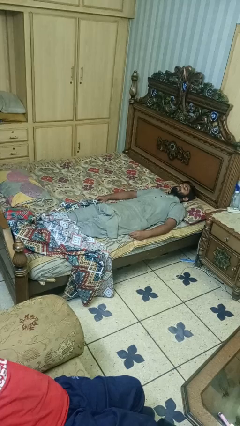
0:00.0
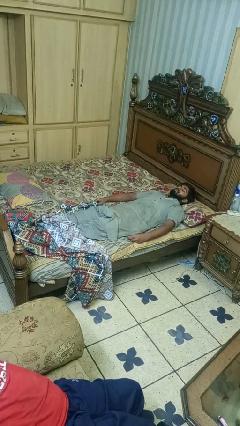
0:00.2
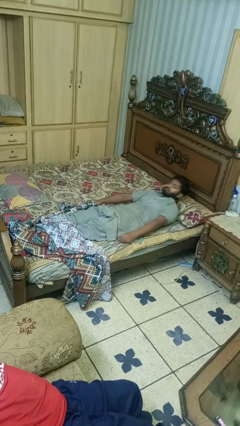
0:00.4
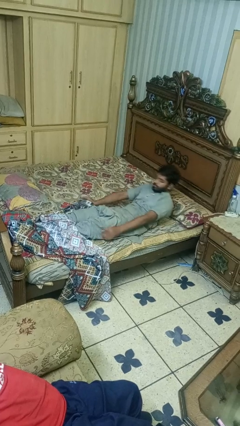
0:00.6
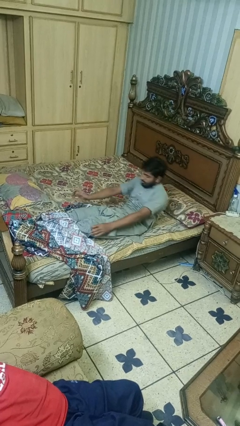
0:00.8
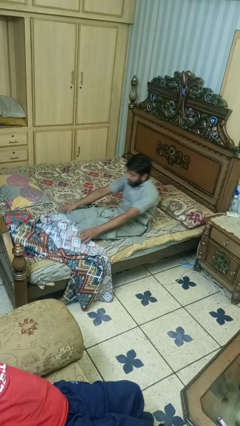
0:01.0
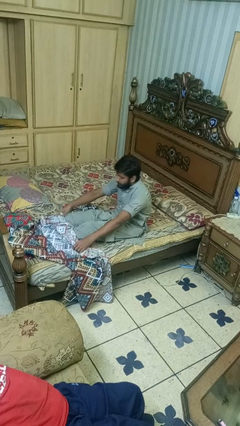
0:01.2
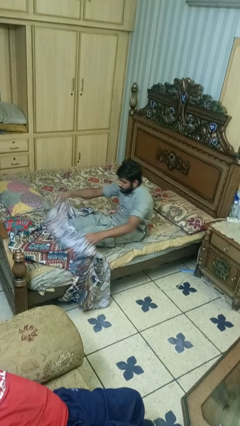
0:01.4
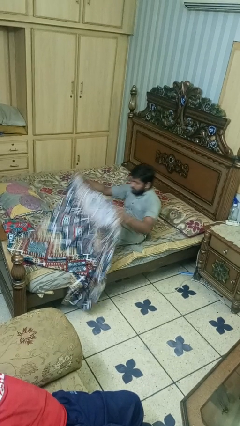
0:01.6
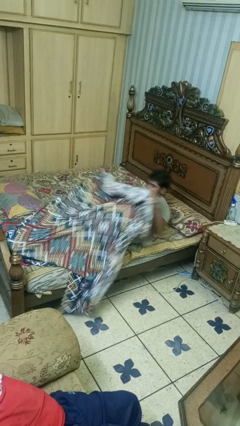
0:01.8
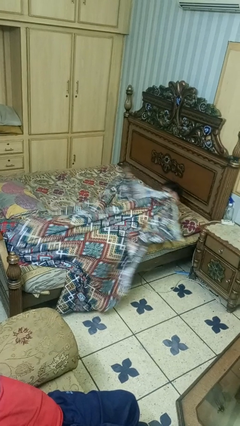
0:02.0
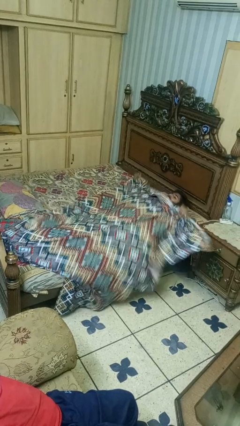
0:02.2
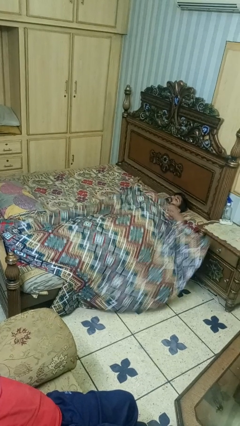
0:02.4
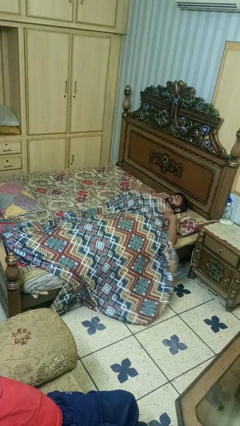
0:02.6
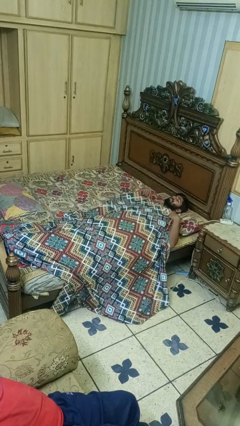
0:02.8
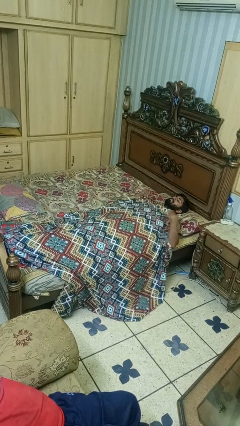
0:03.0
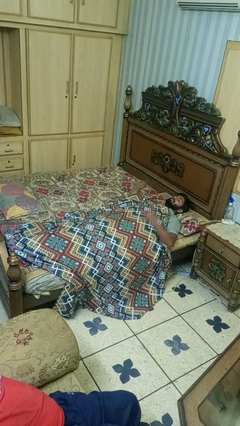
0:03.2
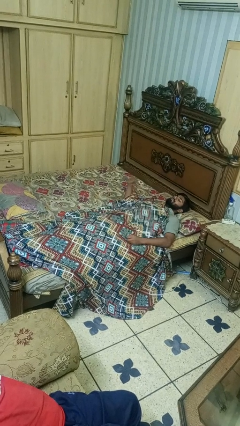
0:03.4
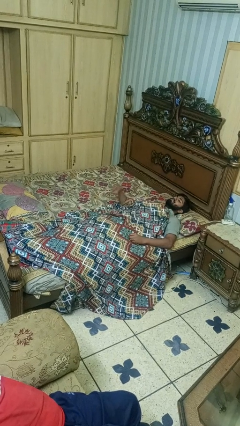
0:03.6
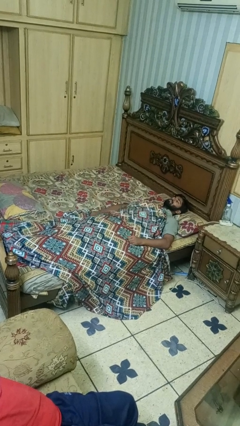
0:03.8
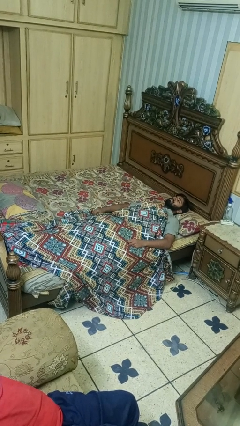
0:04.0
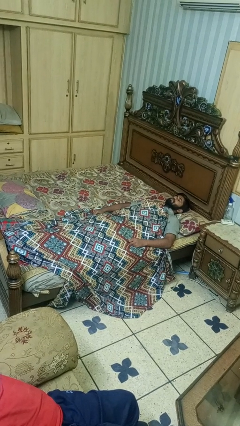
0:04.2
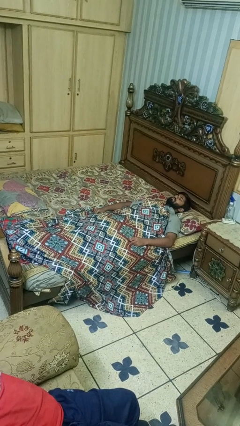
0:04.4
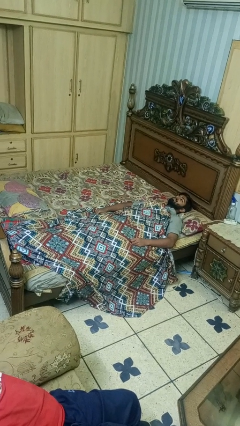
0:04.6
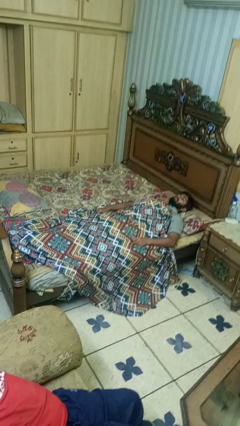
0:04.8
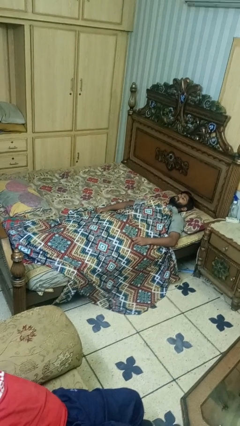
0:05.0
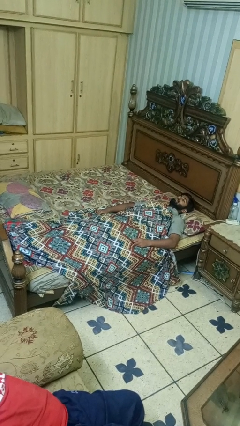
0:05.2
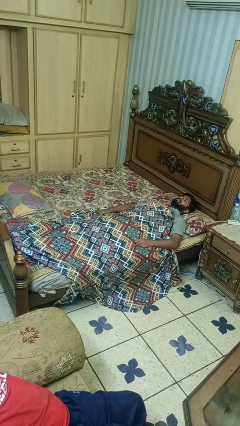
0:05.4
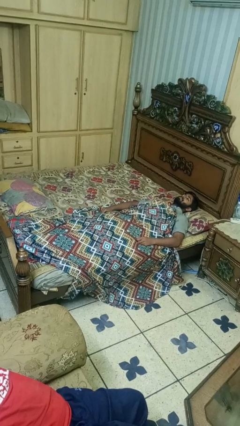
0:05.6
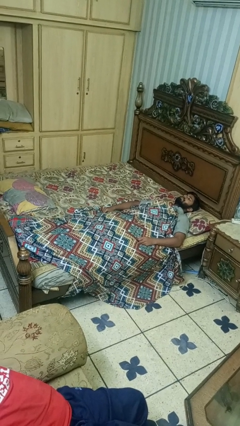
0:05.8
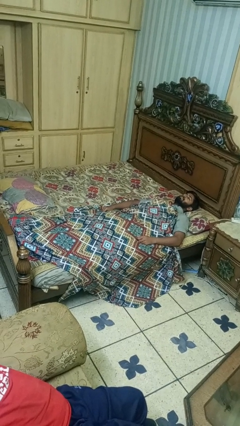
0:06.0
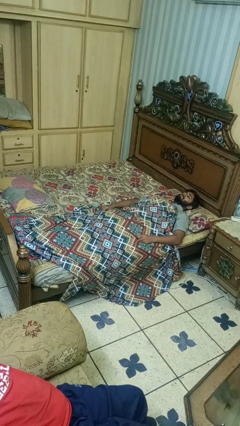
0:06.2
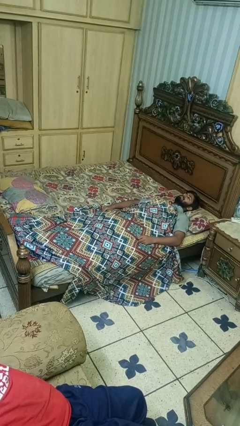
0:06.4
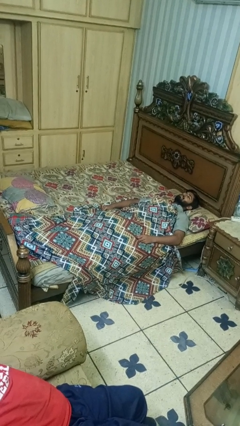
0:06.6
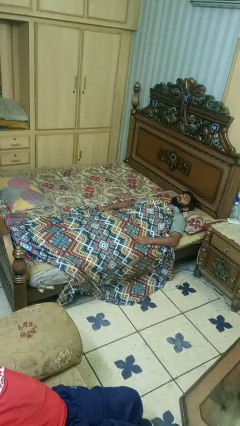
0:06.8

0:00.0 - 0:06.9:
person covers with bedsheets

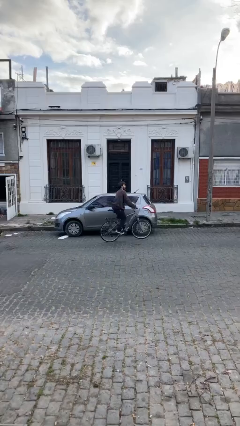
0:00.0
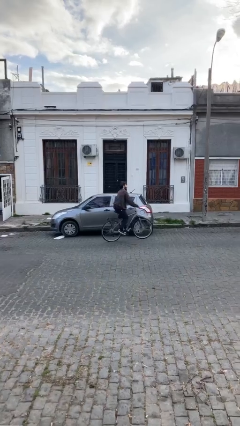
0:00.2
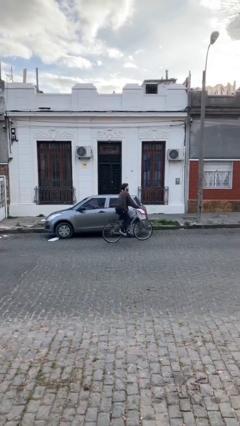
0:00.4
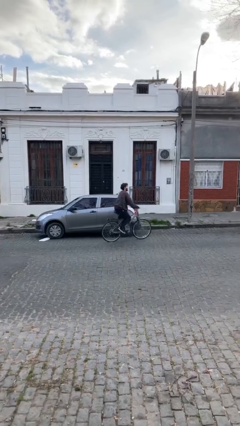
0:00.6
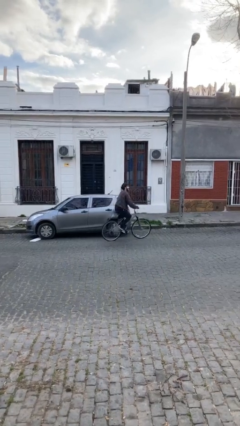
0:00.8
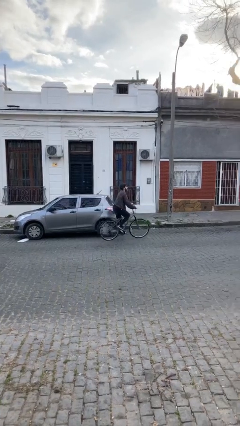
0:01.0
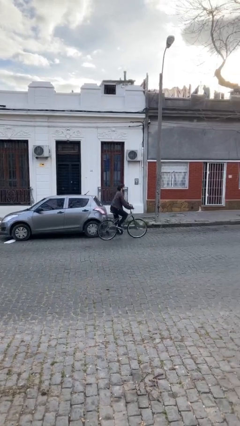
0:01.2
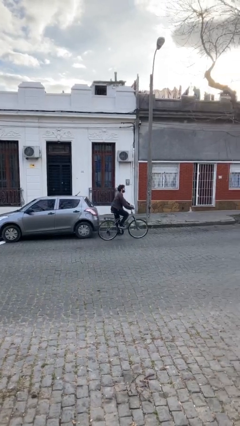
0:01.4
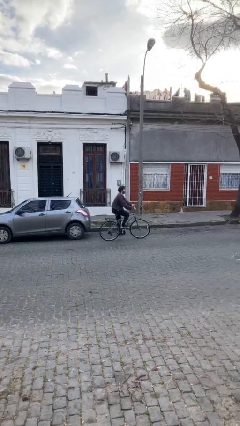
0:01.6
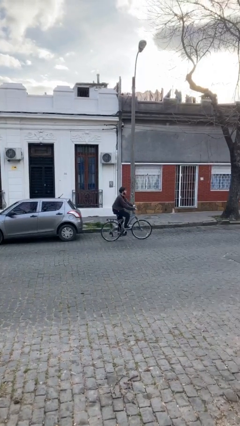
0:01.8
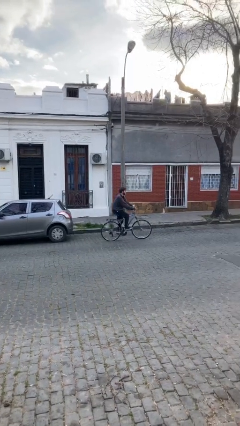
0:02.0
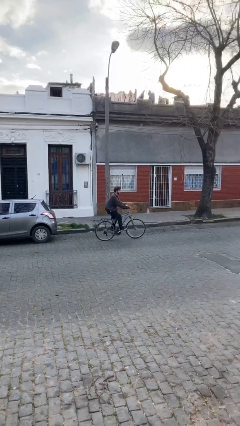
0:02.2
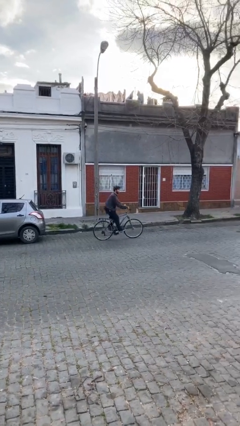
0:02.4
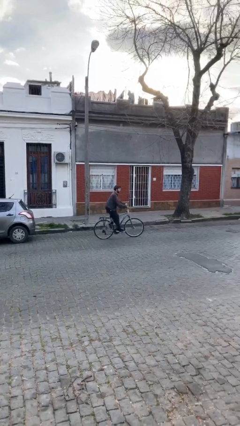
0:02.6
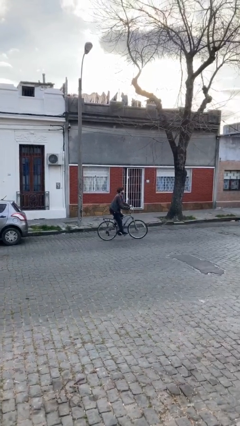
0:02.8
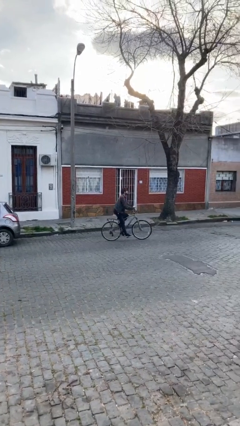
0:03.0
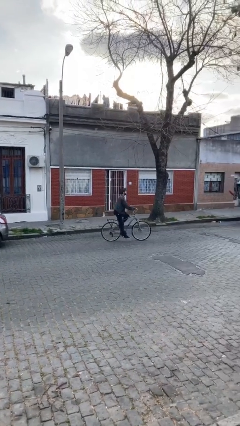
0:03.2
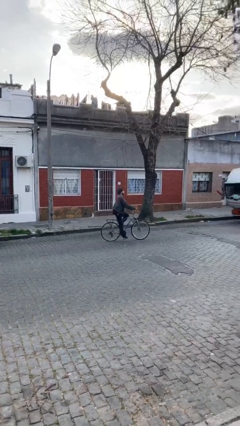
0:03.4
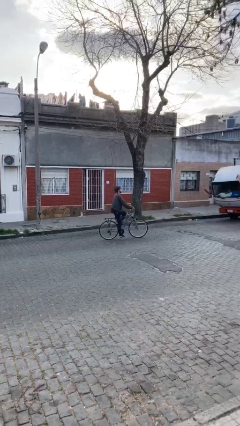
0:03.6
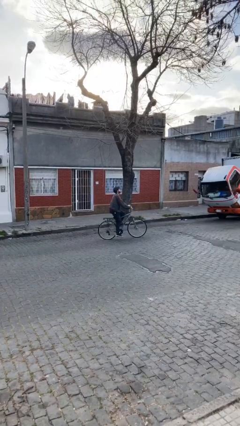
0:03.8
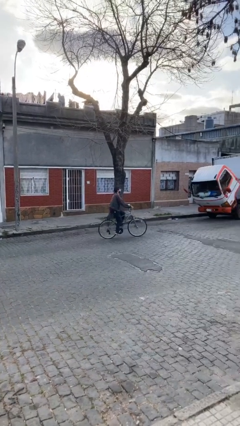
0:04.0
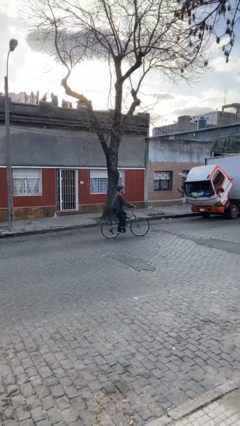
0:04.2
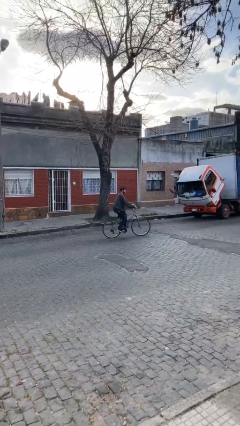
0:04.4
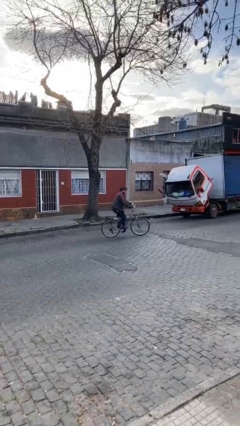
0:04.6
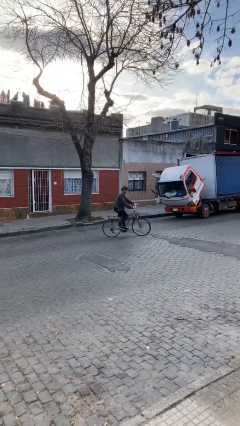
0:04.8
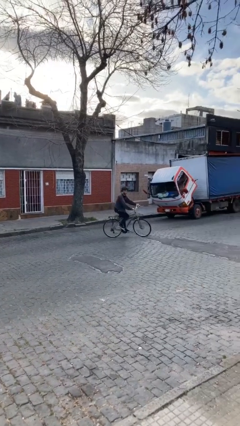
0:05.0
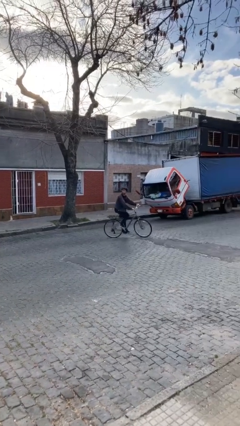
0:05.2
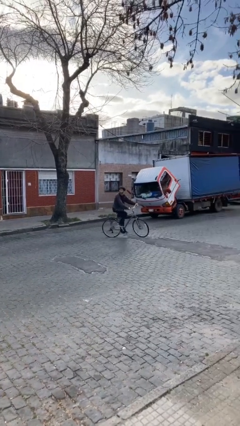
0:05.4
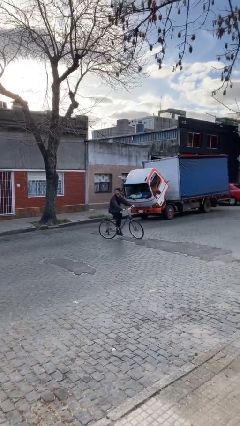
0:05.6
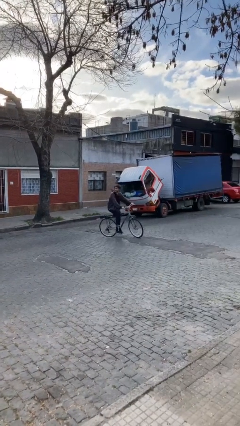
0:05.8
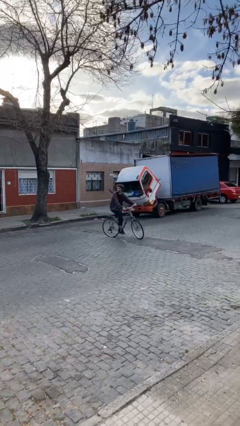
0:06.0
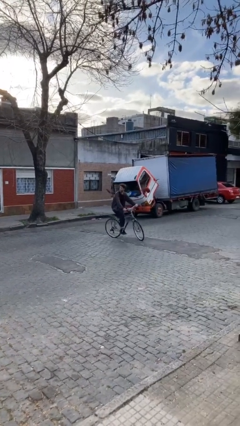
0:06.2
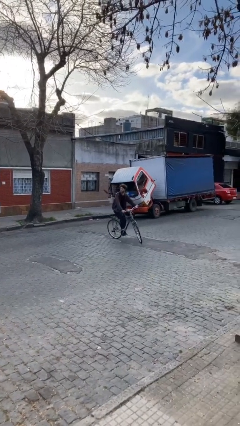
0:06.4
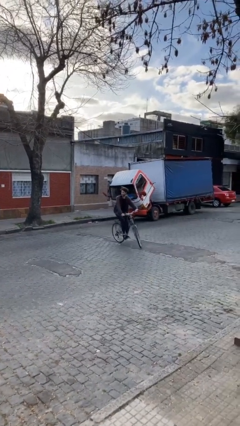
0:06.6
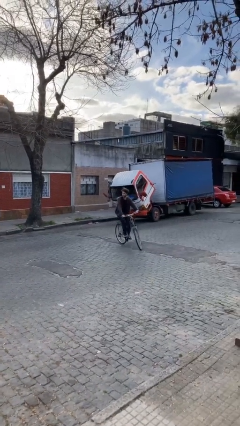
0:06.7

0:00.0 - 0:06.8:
person rides bicycle

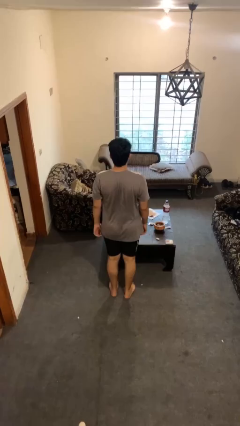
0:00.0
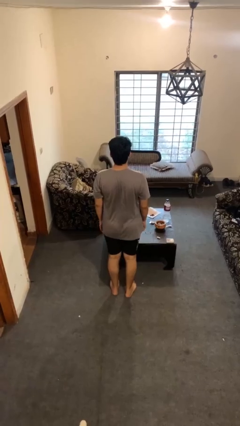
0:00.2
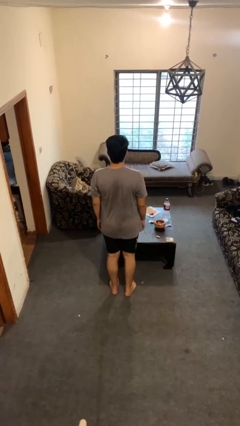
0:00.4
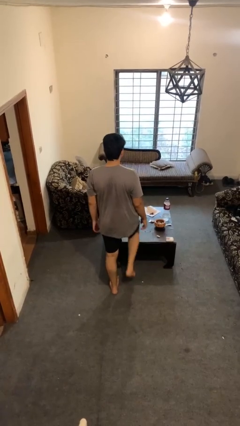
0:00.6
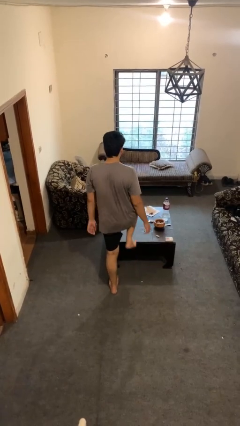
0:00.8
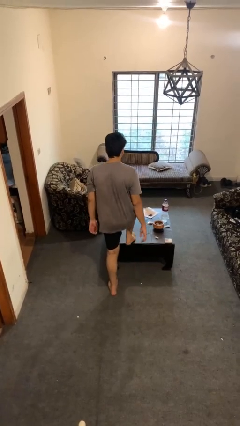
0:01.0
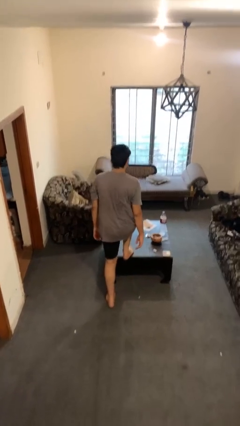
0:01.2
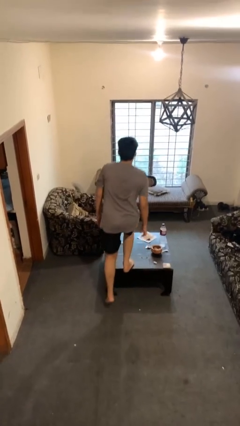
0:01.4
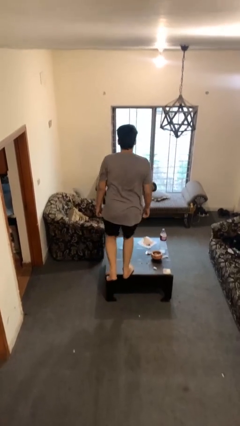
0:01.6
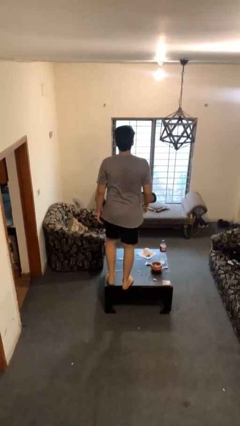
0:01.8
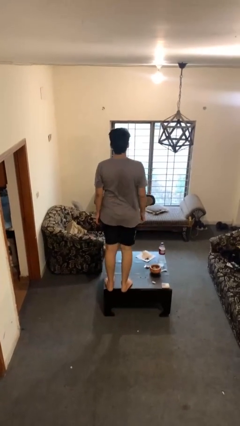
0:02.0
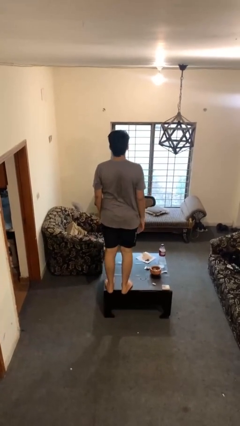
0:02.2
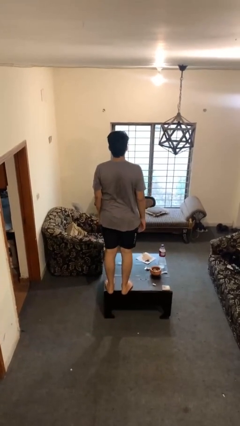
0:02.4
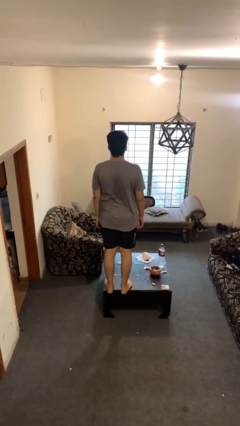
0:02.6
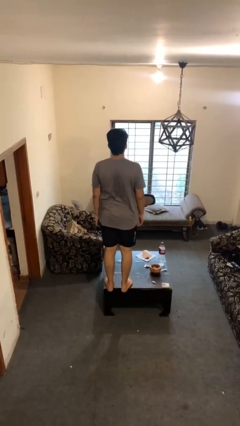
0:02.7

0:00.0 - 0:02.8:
person climbs on table

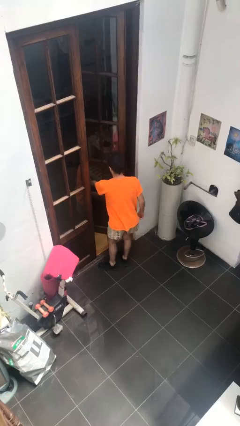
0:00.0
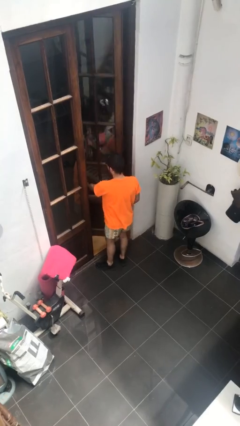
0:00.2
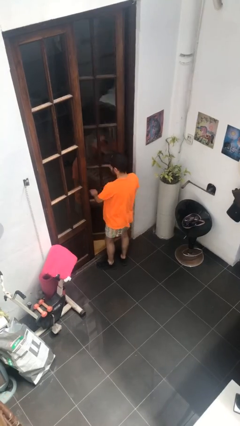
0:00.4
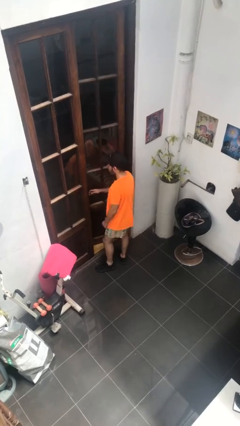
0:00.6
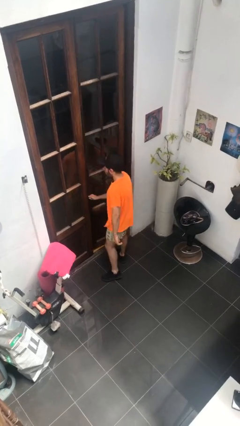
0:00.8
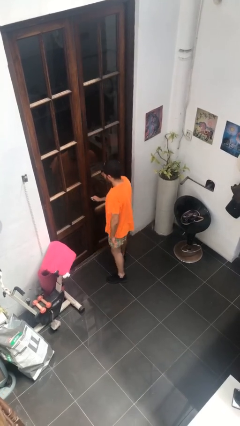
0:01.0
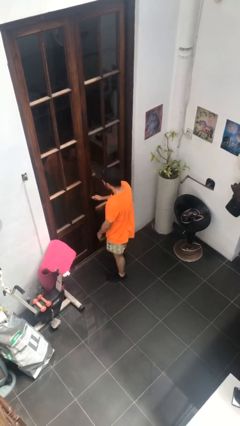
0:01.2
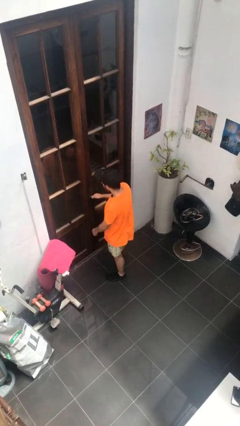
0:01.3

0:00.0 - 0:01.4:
person closes facility door

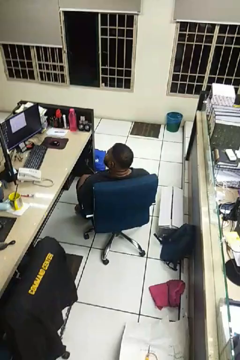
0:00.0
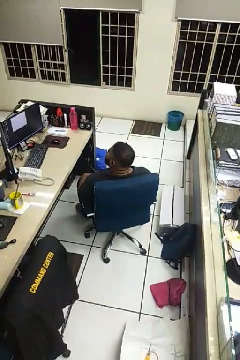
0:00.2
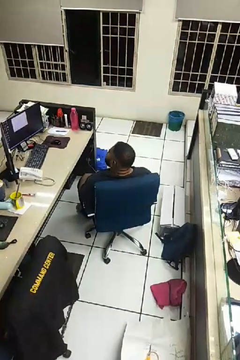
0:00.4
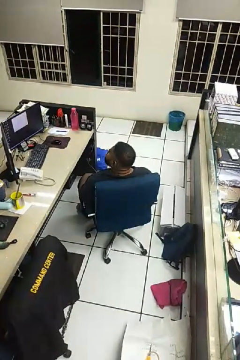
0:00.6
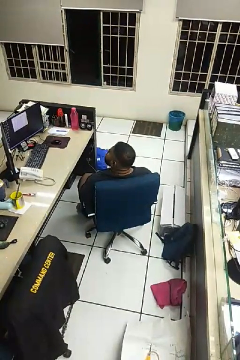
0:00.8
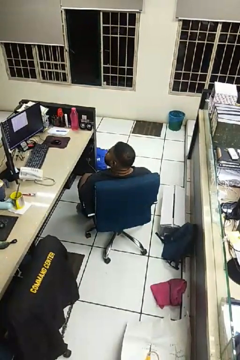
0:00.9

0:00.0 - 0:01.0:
person sticks out tongue
